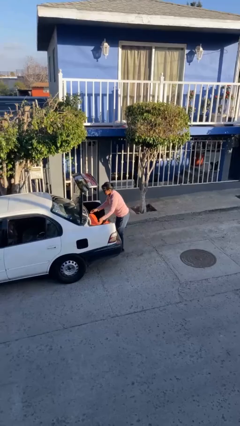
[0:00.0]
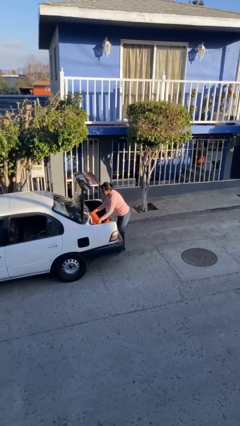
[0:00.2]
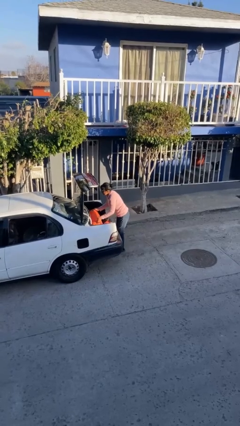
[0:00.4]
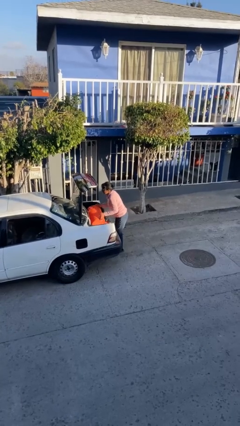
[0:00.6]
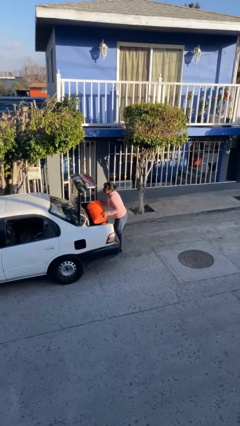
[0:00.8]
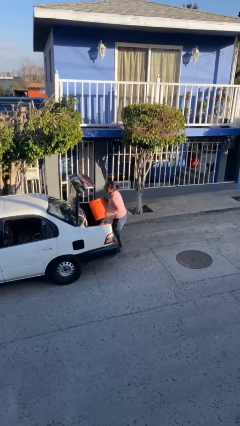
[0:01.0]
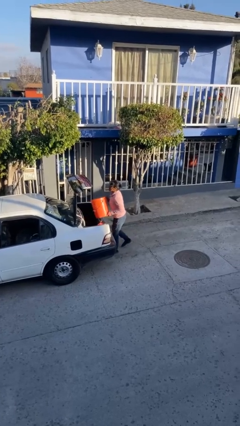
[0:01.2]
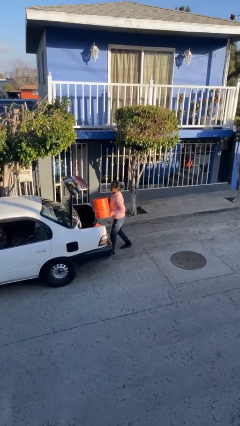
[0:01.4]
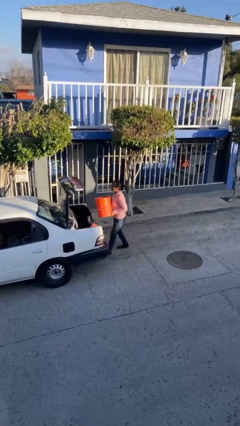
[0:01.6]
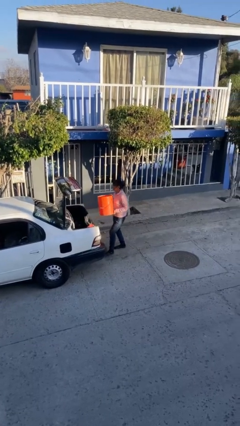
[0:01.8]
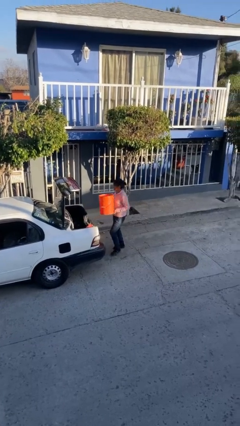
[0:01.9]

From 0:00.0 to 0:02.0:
person unloads car

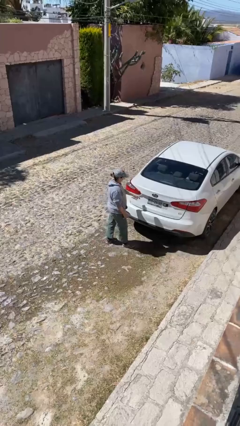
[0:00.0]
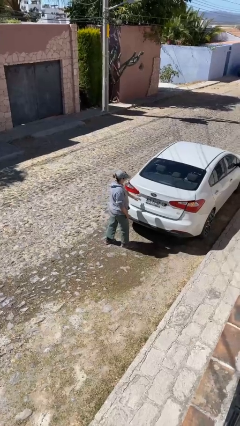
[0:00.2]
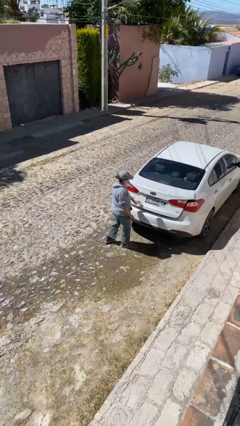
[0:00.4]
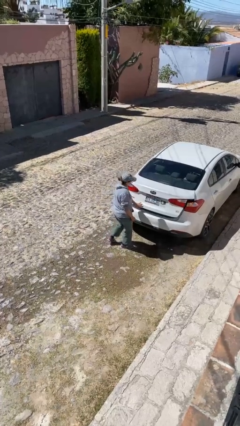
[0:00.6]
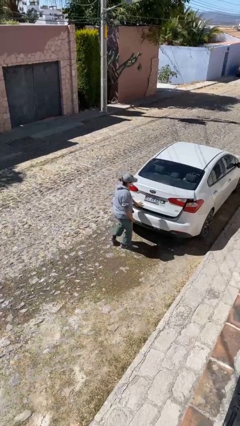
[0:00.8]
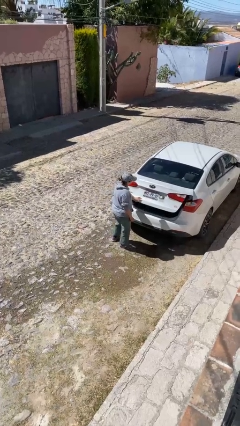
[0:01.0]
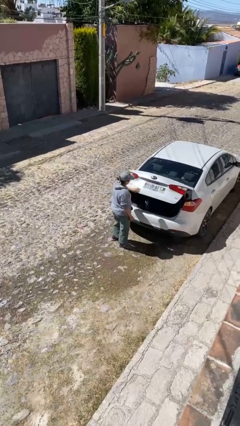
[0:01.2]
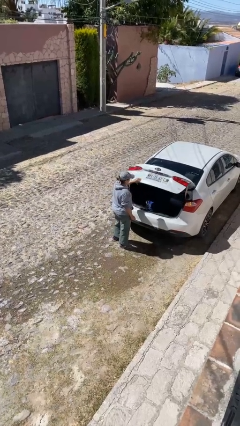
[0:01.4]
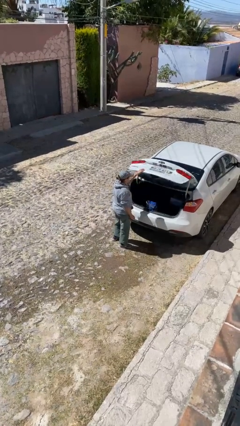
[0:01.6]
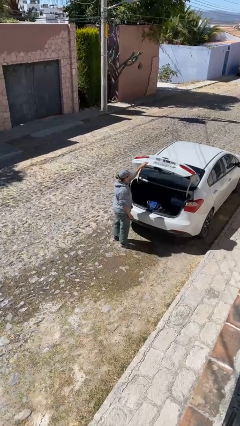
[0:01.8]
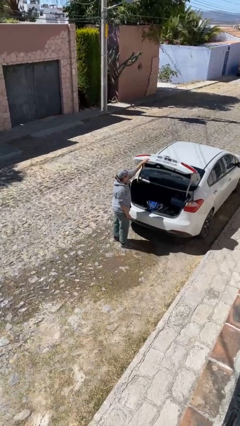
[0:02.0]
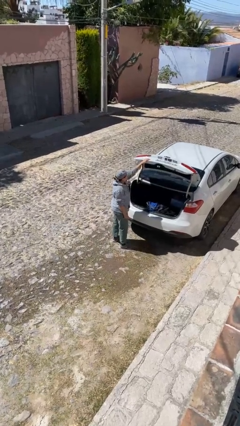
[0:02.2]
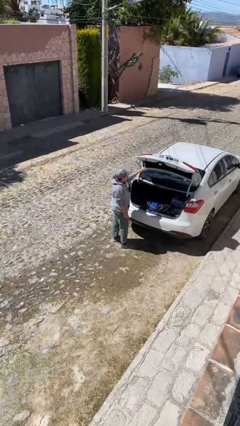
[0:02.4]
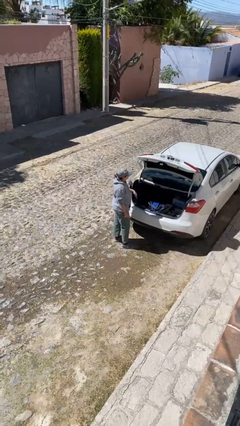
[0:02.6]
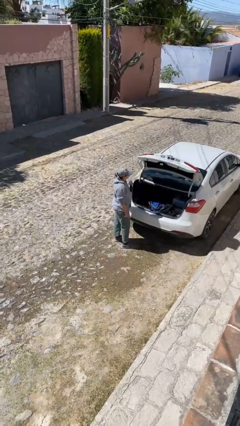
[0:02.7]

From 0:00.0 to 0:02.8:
person opens car trunk

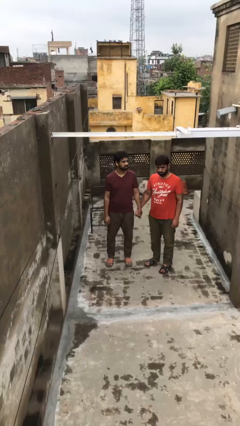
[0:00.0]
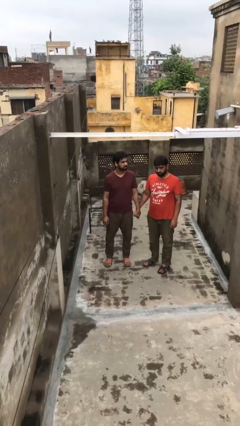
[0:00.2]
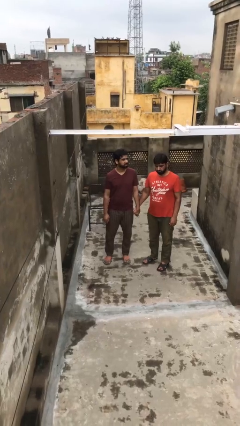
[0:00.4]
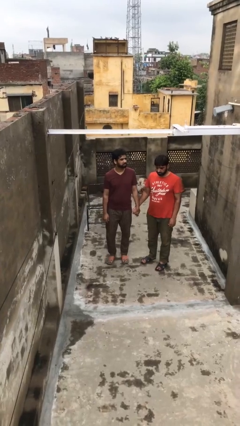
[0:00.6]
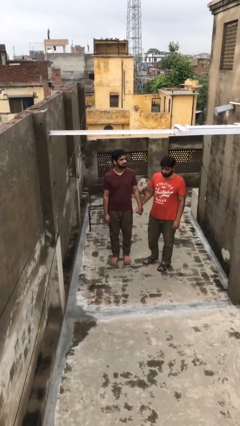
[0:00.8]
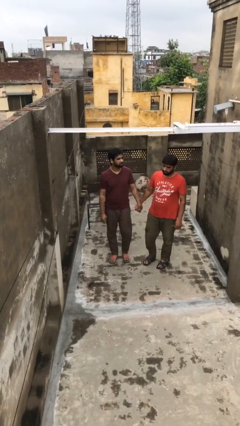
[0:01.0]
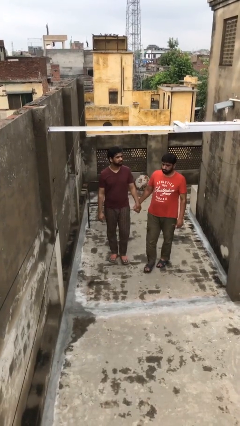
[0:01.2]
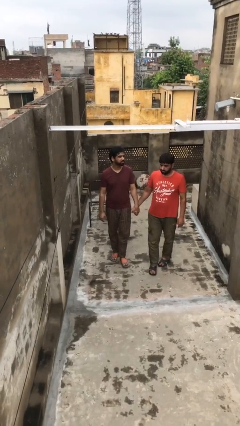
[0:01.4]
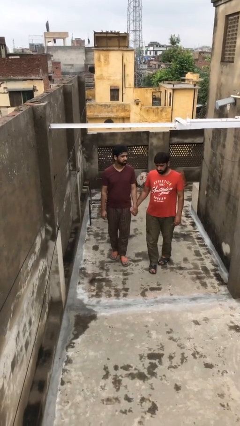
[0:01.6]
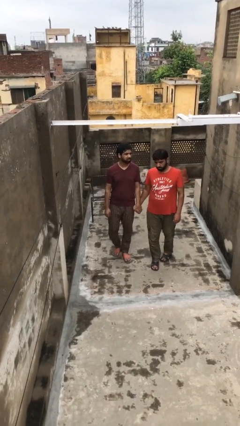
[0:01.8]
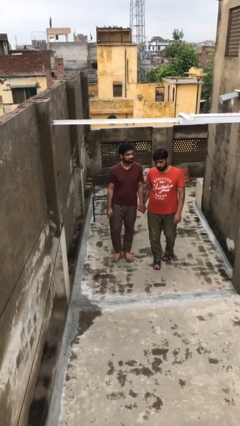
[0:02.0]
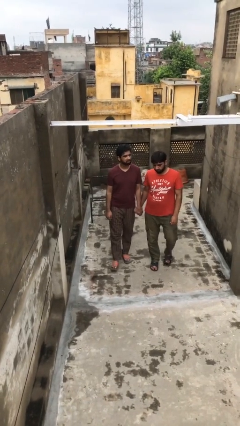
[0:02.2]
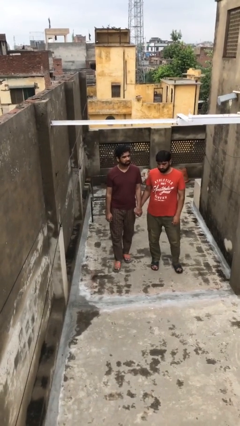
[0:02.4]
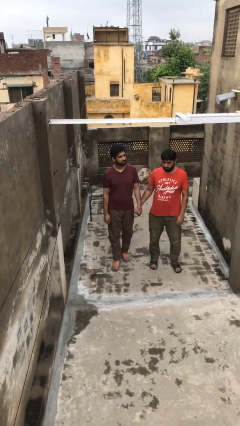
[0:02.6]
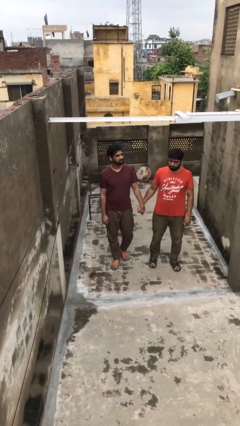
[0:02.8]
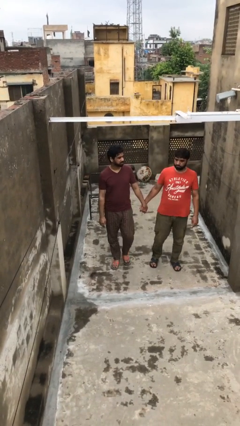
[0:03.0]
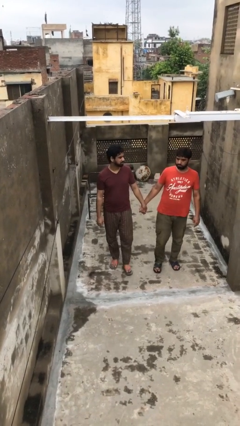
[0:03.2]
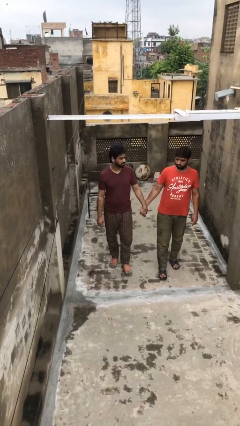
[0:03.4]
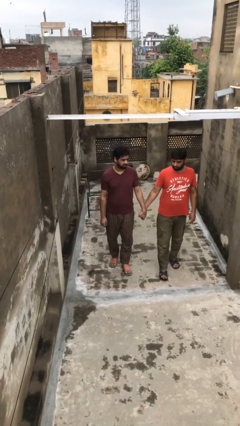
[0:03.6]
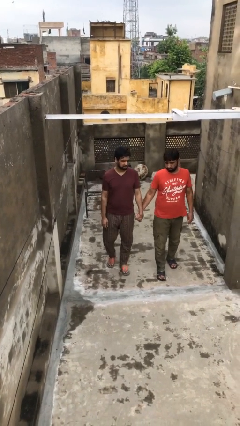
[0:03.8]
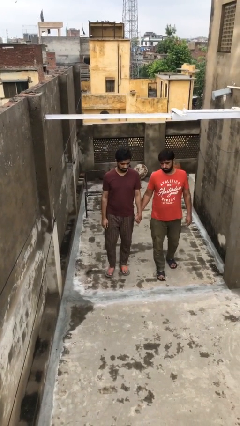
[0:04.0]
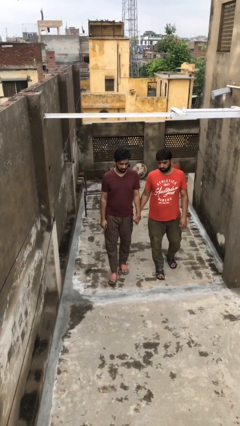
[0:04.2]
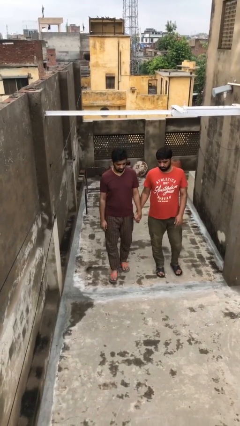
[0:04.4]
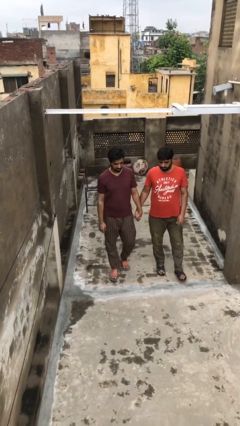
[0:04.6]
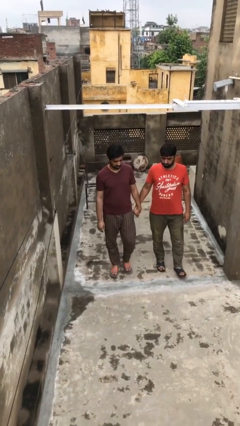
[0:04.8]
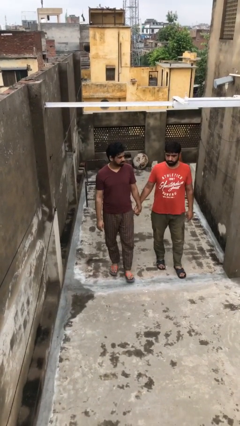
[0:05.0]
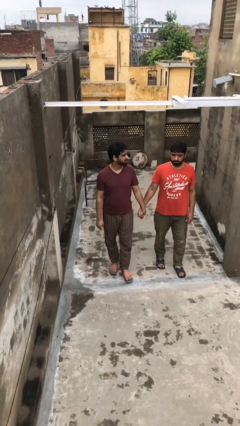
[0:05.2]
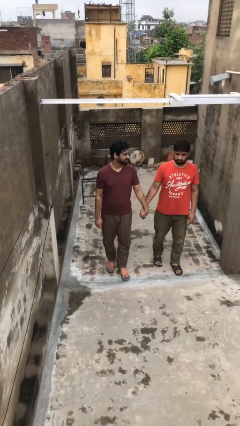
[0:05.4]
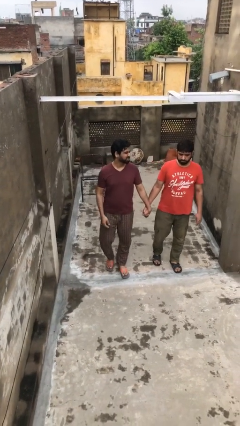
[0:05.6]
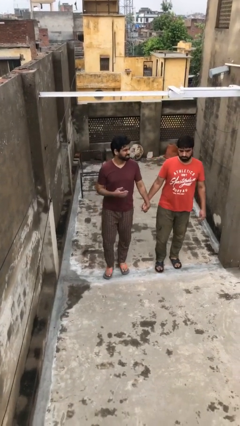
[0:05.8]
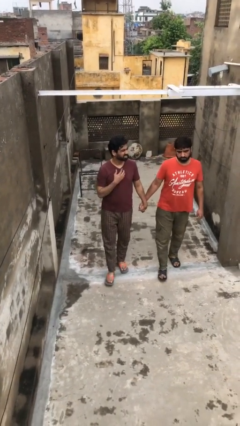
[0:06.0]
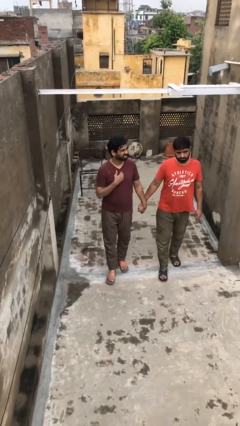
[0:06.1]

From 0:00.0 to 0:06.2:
person holds hand

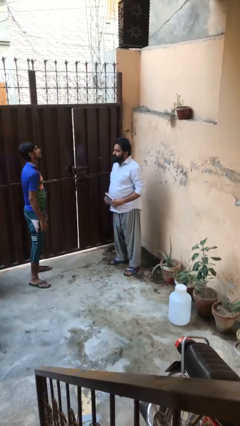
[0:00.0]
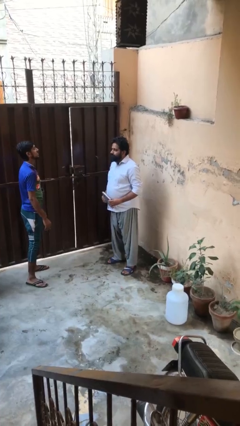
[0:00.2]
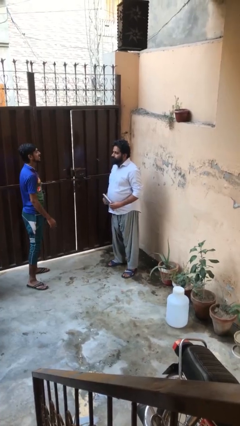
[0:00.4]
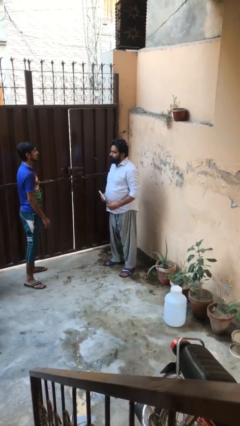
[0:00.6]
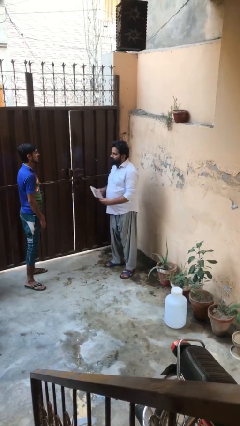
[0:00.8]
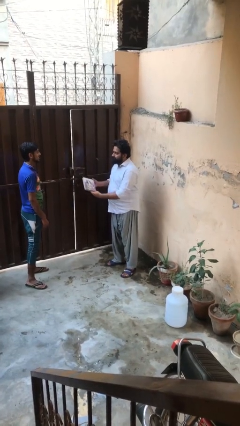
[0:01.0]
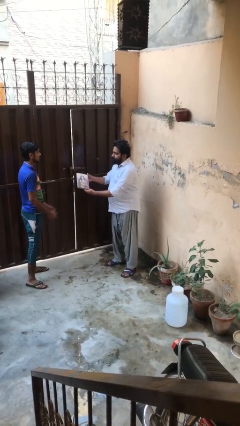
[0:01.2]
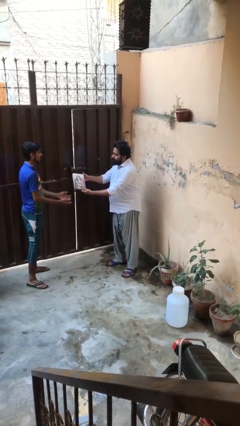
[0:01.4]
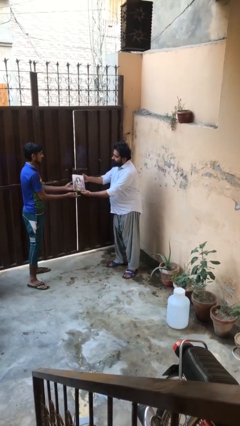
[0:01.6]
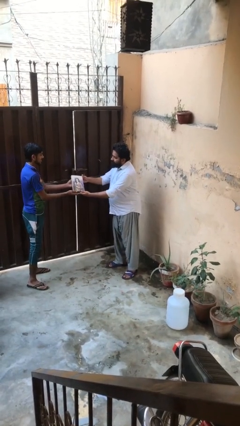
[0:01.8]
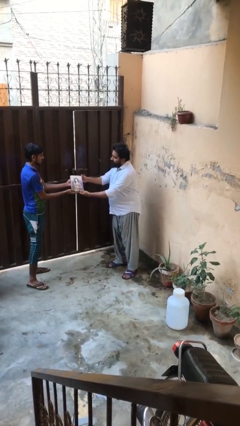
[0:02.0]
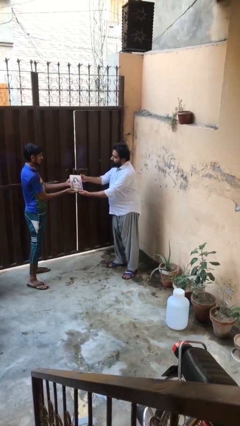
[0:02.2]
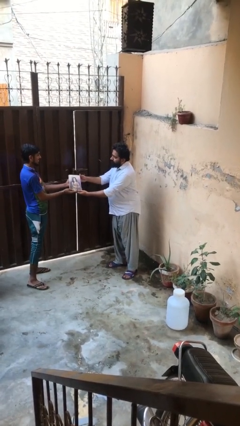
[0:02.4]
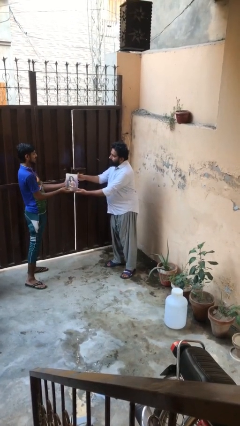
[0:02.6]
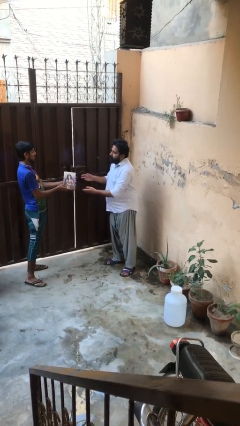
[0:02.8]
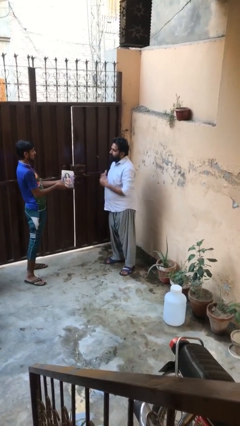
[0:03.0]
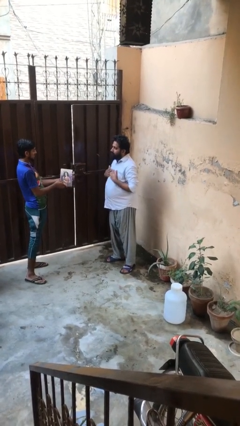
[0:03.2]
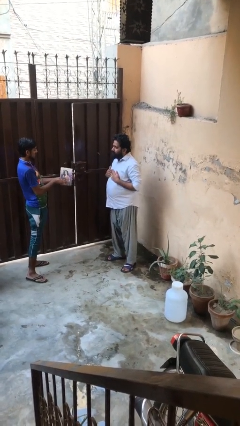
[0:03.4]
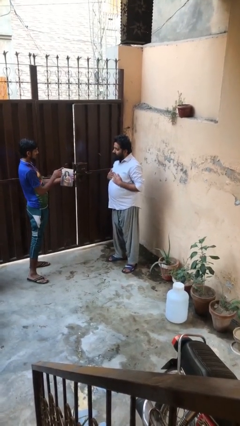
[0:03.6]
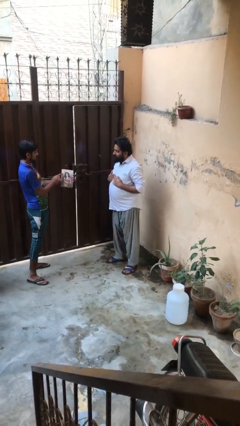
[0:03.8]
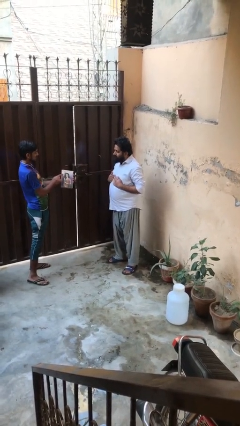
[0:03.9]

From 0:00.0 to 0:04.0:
person transfers object to person

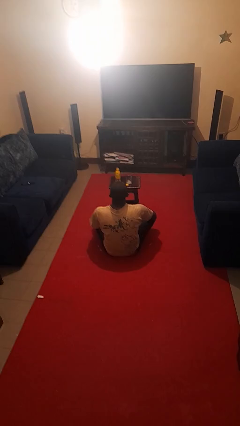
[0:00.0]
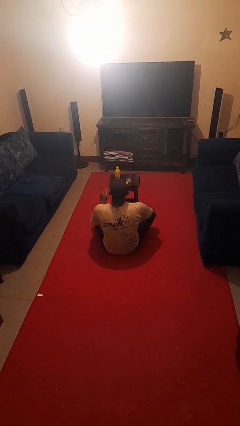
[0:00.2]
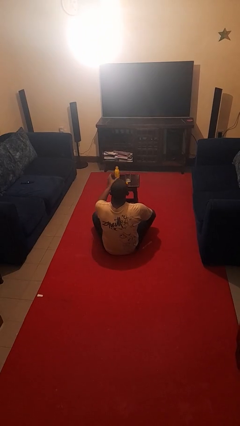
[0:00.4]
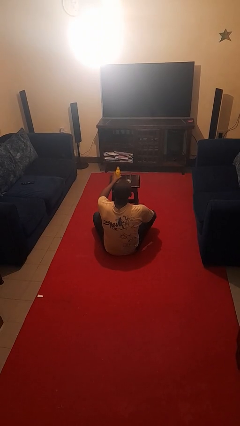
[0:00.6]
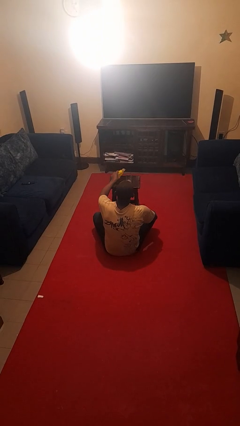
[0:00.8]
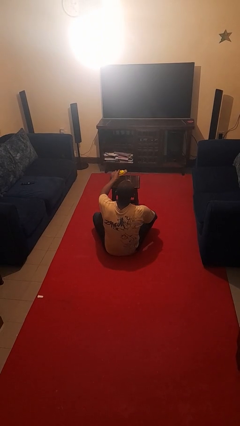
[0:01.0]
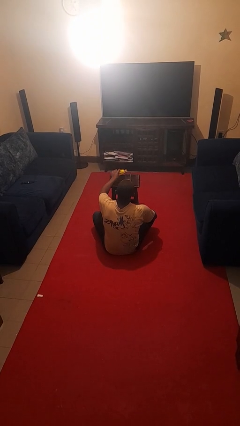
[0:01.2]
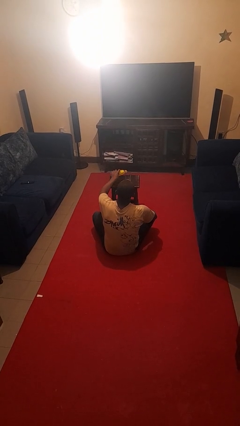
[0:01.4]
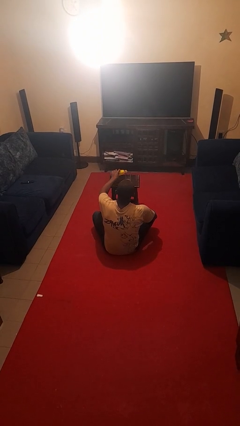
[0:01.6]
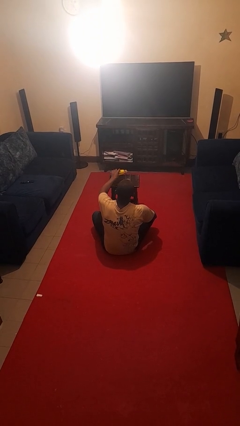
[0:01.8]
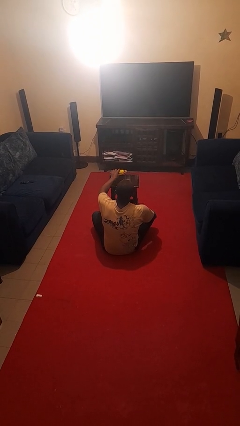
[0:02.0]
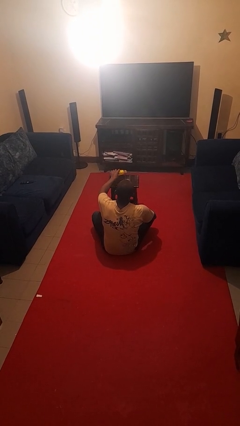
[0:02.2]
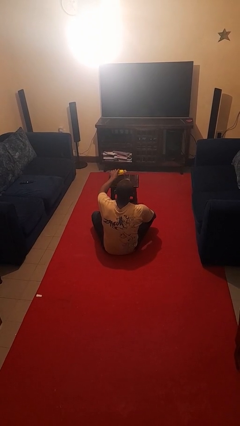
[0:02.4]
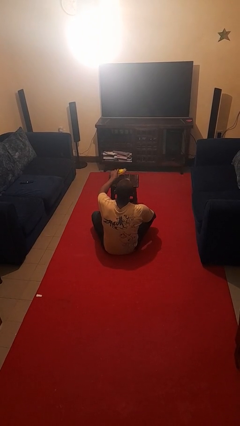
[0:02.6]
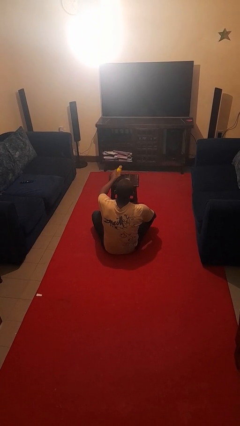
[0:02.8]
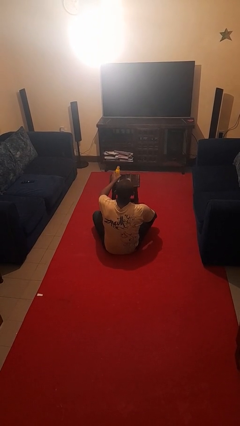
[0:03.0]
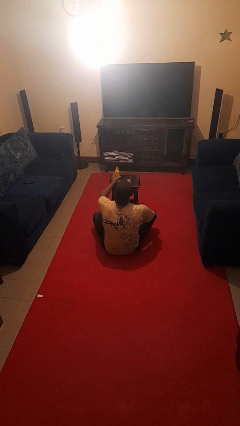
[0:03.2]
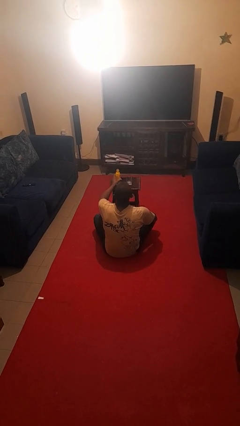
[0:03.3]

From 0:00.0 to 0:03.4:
person pours liquid into cup
